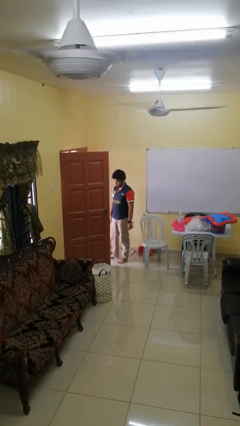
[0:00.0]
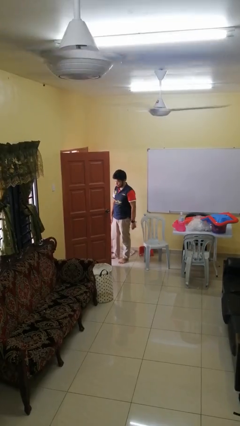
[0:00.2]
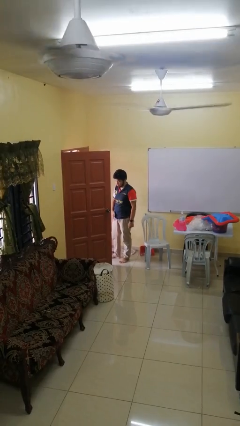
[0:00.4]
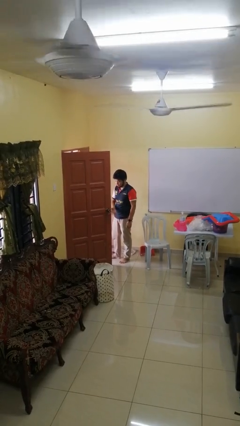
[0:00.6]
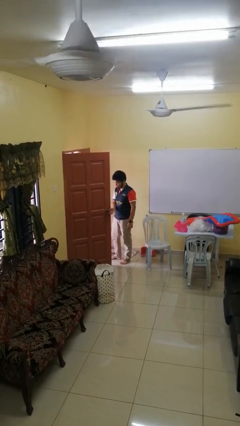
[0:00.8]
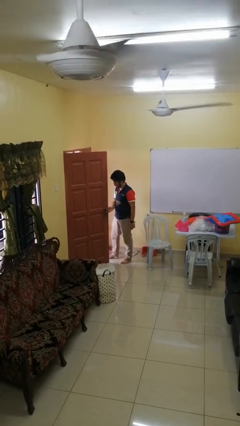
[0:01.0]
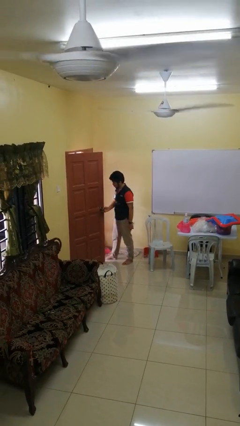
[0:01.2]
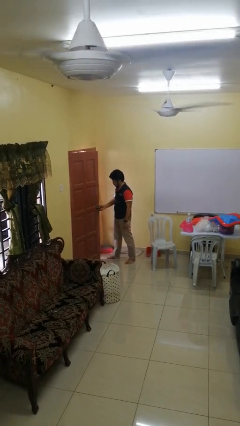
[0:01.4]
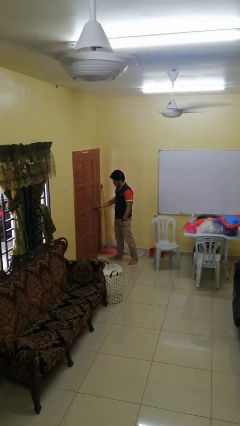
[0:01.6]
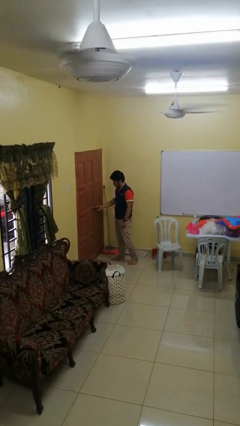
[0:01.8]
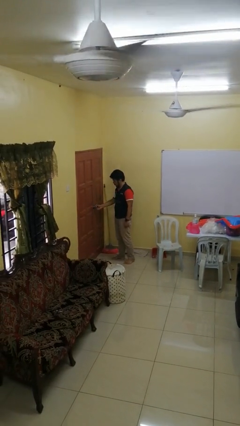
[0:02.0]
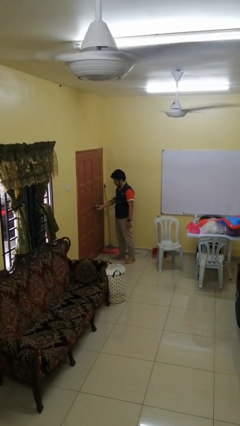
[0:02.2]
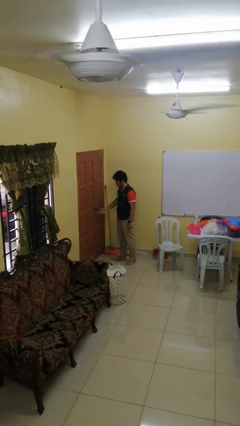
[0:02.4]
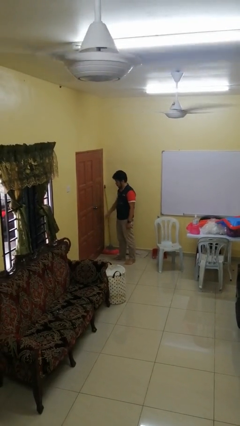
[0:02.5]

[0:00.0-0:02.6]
person closes facility door

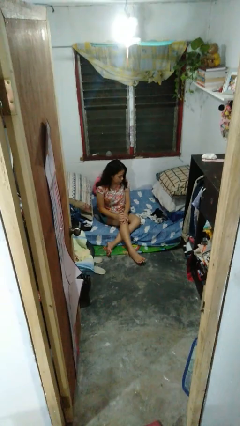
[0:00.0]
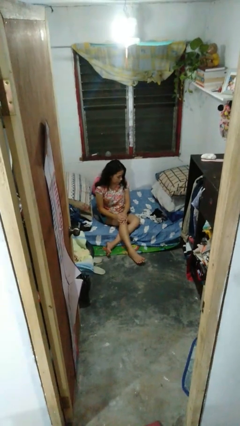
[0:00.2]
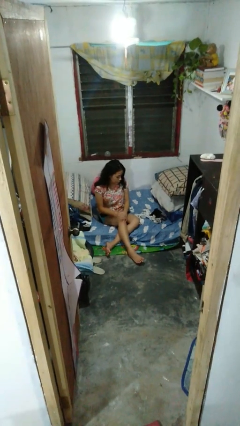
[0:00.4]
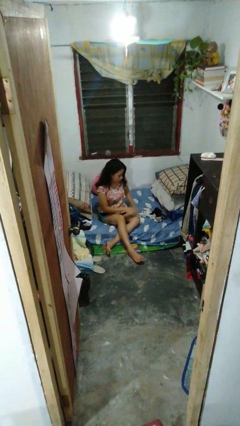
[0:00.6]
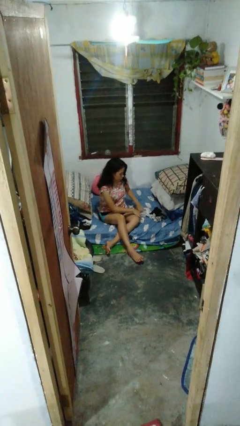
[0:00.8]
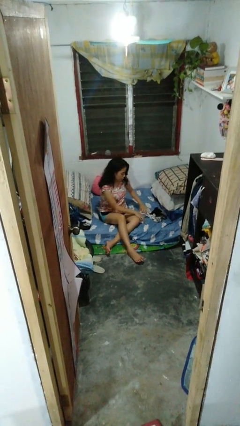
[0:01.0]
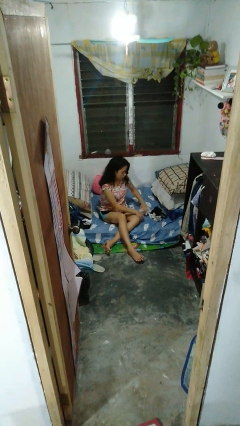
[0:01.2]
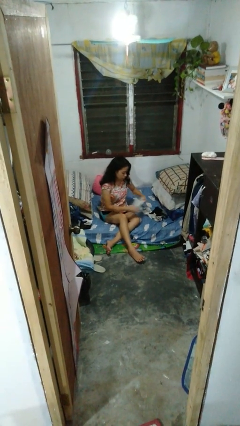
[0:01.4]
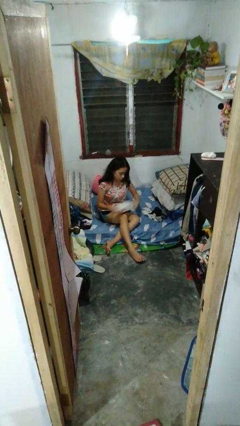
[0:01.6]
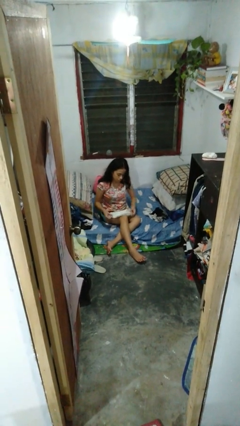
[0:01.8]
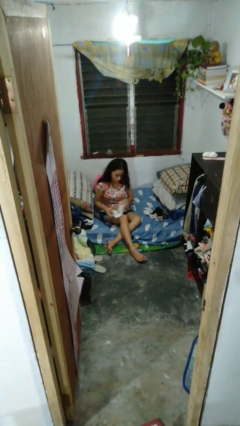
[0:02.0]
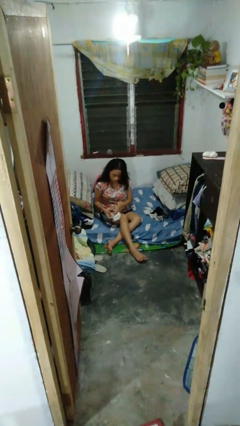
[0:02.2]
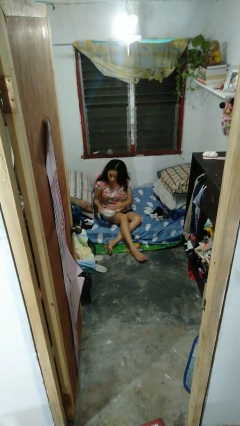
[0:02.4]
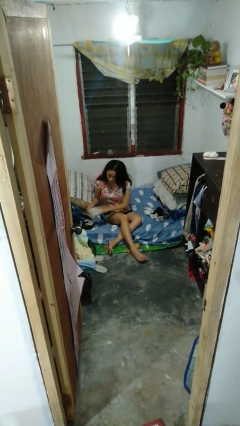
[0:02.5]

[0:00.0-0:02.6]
person folds socks

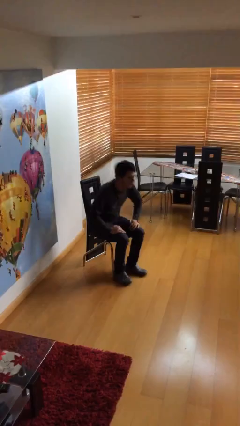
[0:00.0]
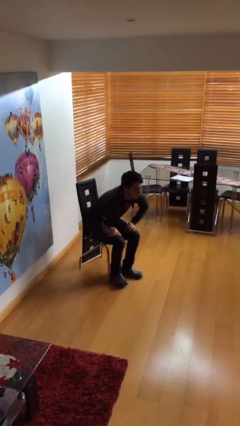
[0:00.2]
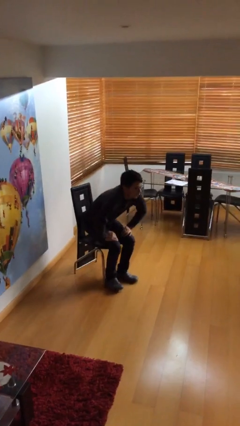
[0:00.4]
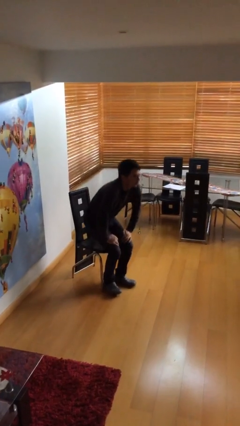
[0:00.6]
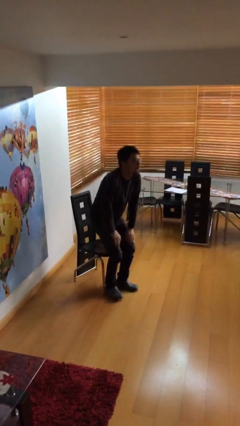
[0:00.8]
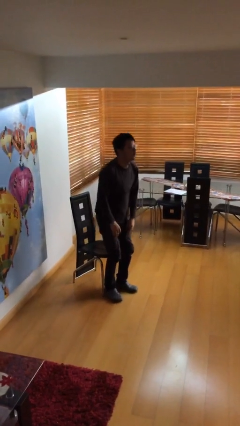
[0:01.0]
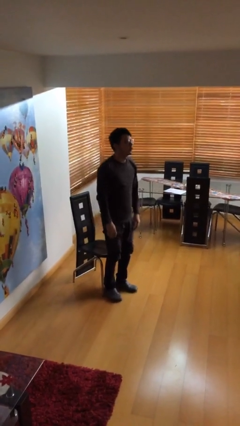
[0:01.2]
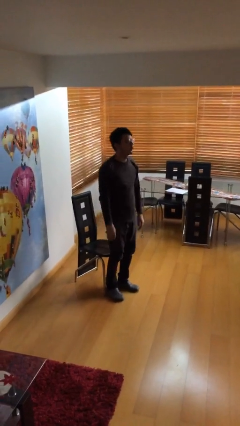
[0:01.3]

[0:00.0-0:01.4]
person stands up

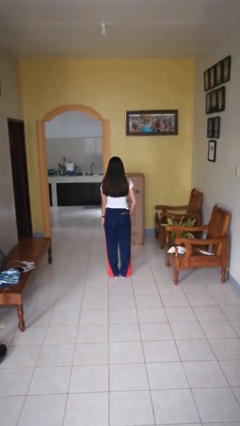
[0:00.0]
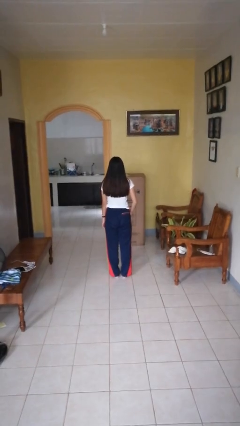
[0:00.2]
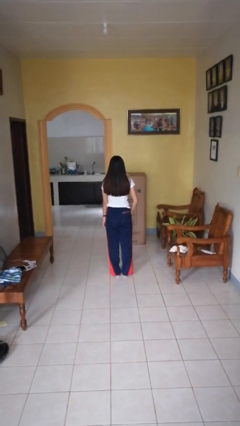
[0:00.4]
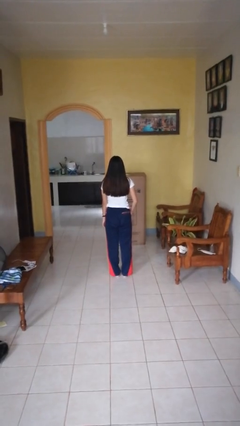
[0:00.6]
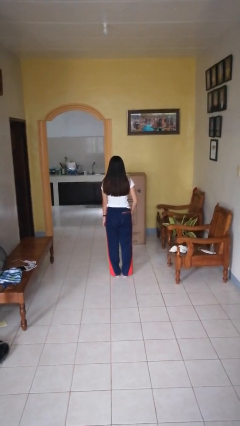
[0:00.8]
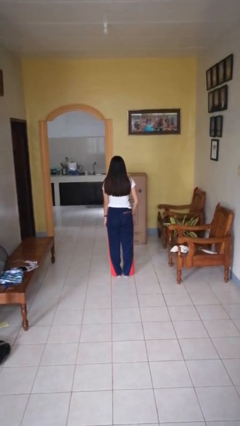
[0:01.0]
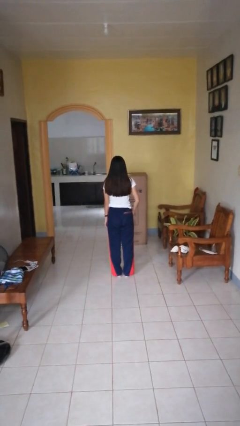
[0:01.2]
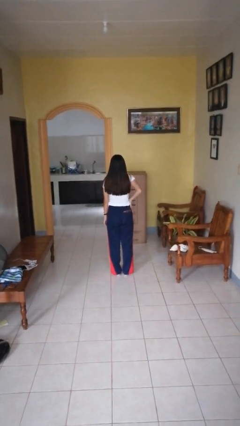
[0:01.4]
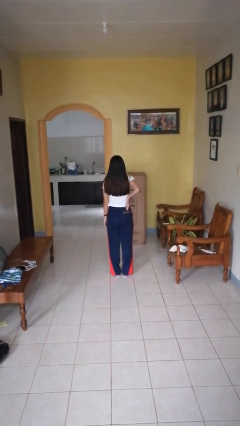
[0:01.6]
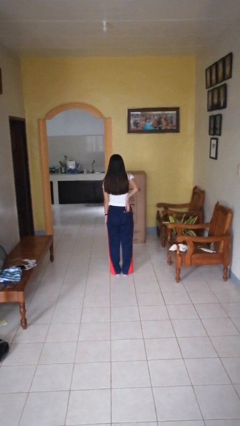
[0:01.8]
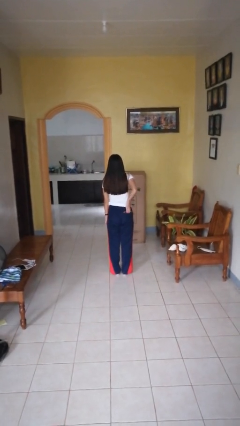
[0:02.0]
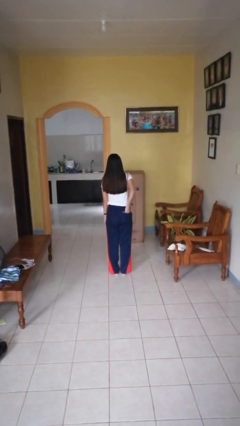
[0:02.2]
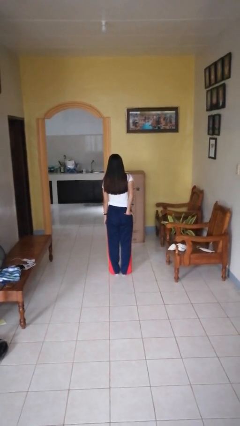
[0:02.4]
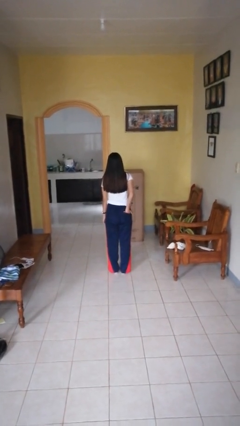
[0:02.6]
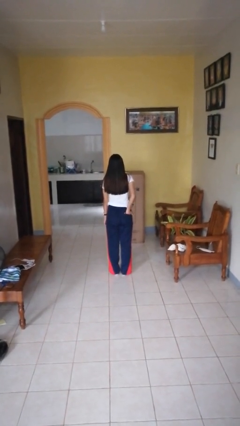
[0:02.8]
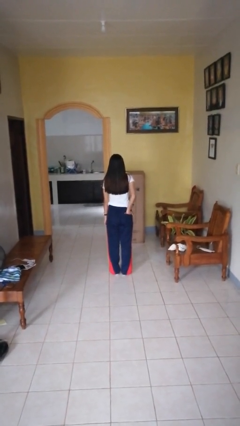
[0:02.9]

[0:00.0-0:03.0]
person puts hands in back pockets

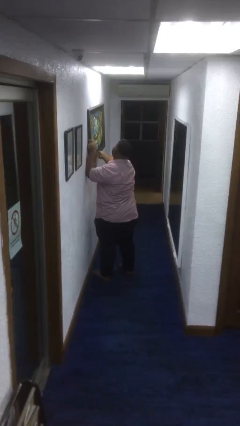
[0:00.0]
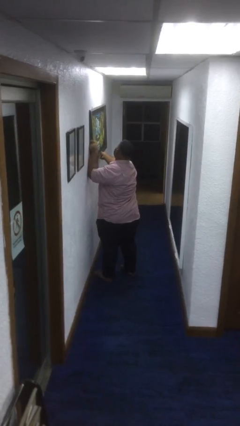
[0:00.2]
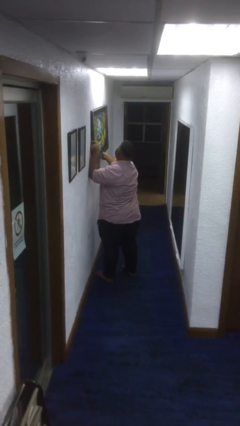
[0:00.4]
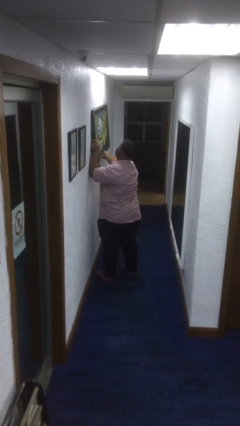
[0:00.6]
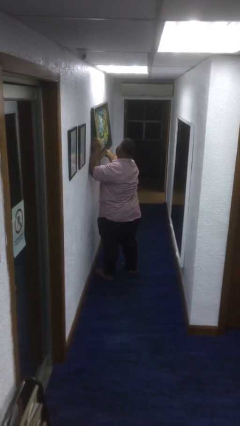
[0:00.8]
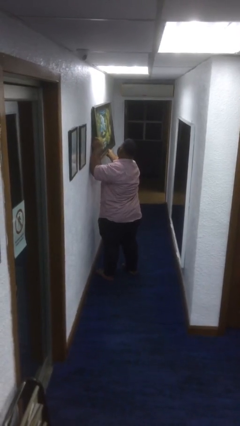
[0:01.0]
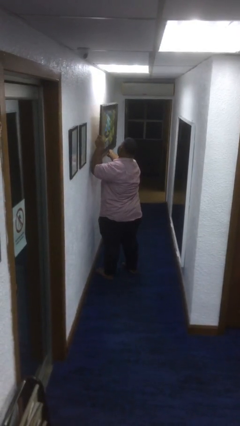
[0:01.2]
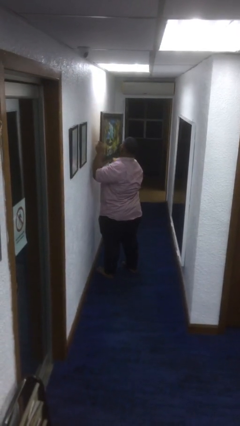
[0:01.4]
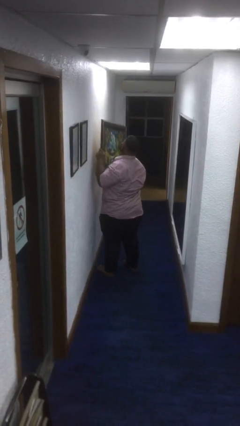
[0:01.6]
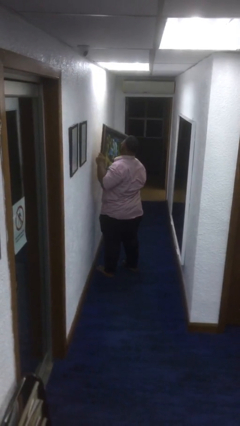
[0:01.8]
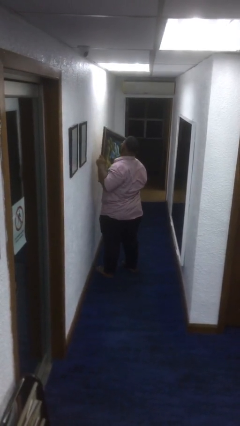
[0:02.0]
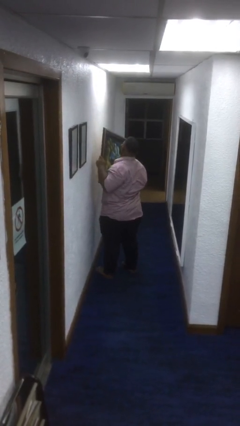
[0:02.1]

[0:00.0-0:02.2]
person takes down picture frame

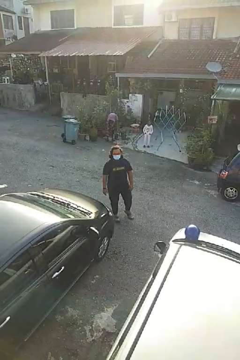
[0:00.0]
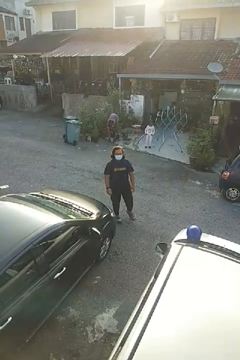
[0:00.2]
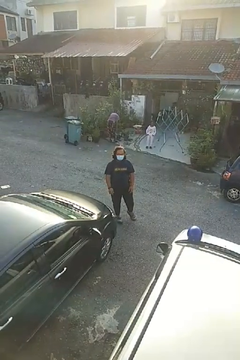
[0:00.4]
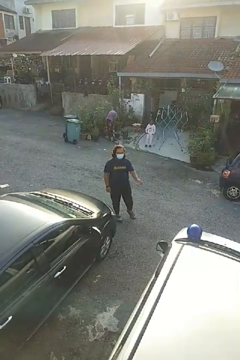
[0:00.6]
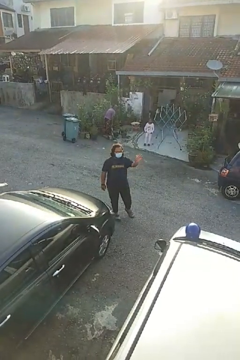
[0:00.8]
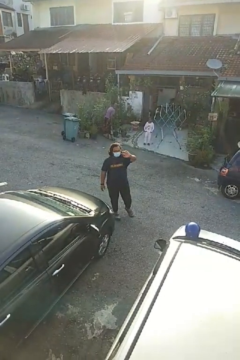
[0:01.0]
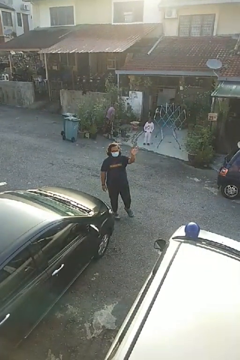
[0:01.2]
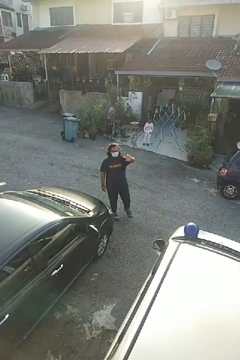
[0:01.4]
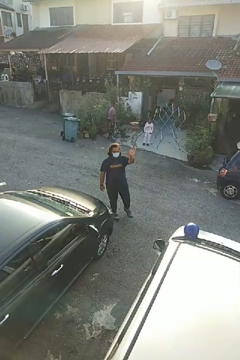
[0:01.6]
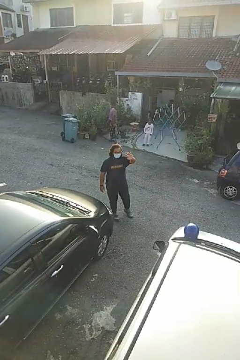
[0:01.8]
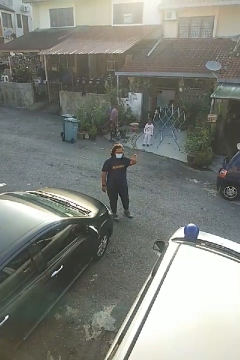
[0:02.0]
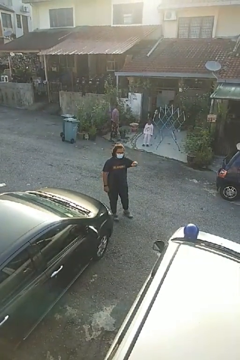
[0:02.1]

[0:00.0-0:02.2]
person waves at person

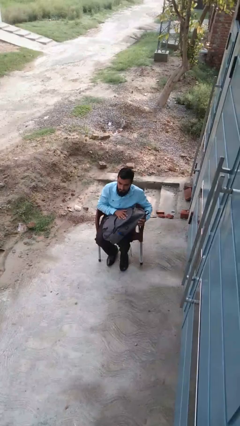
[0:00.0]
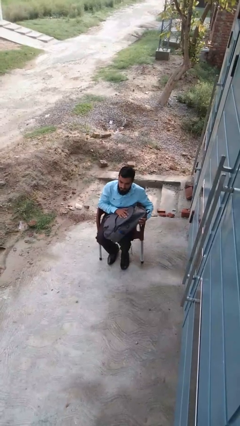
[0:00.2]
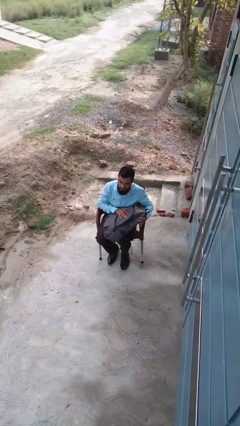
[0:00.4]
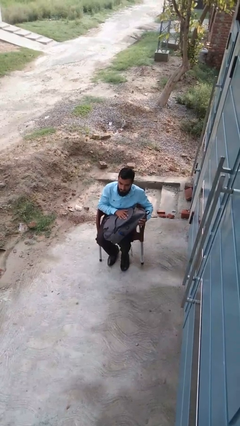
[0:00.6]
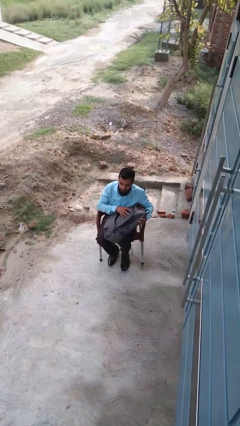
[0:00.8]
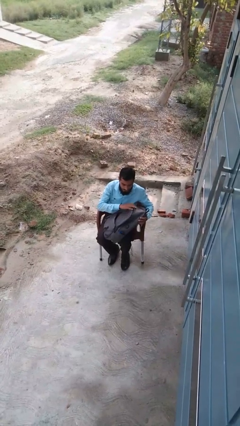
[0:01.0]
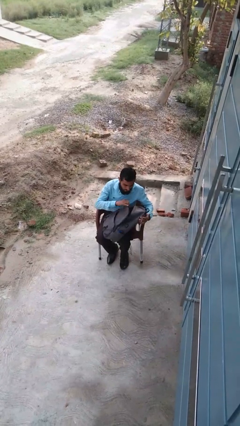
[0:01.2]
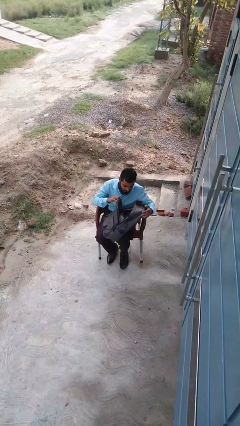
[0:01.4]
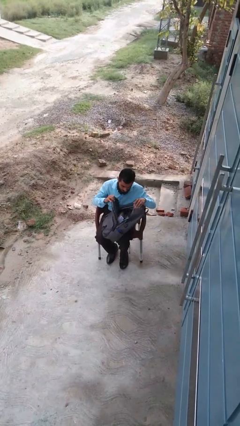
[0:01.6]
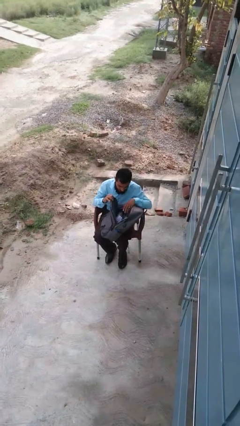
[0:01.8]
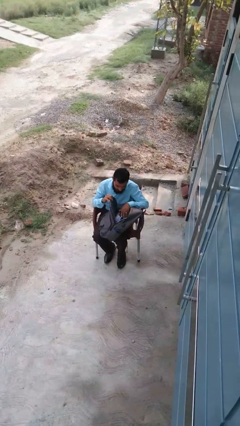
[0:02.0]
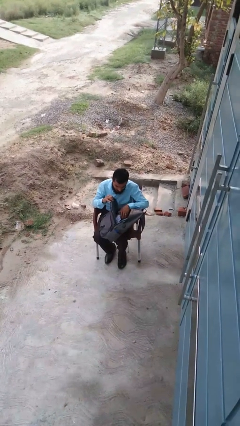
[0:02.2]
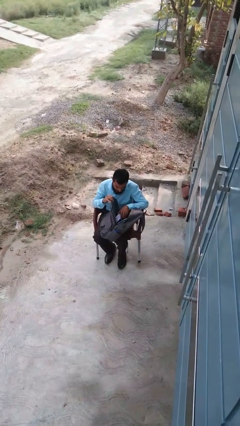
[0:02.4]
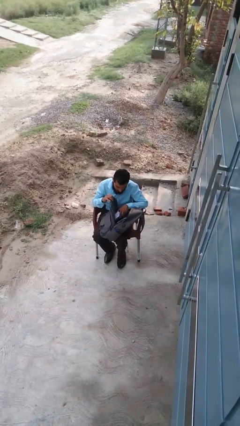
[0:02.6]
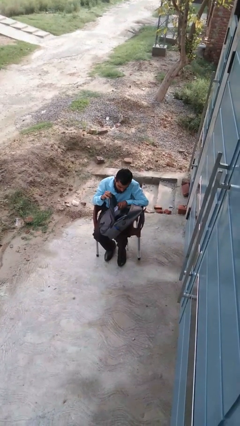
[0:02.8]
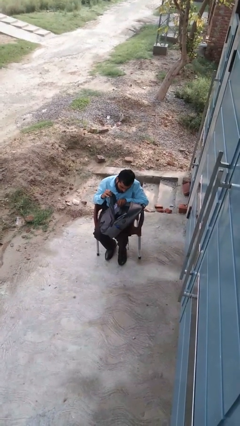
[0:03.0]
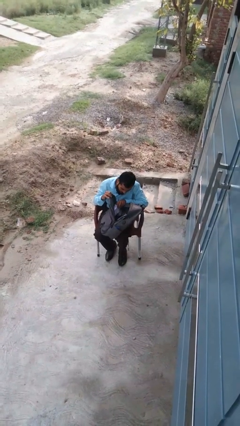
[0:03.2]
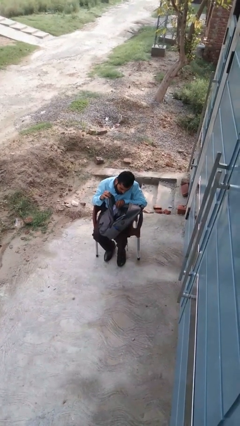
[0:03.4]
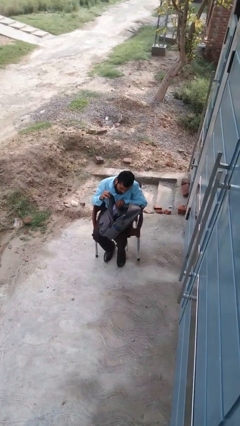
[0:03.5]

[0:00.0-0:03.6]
person searches in backpack

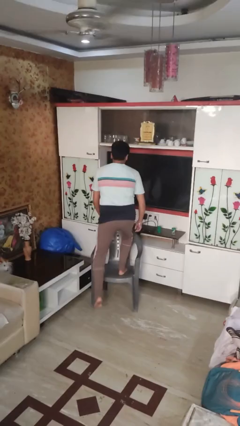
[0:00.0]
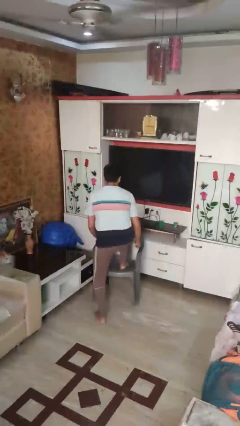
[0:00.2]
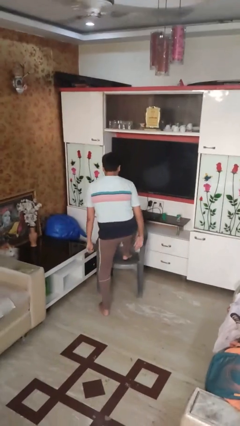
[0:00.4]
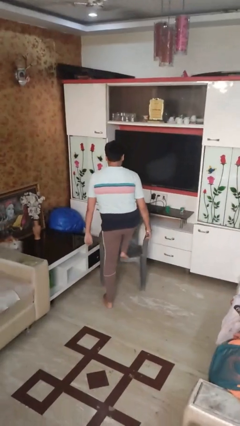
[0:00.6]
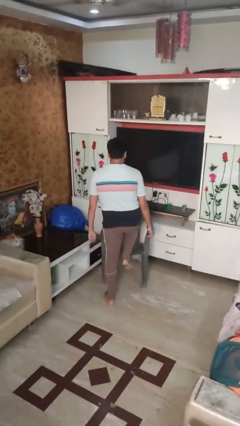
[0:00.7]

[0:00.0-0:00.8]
person climbs off chair
